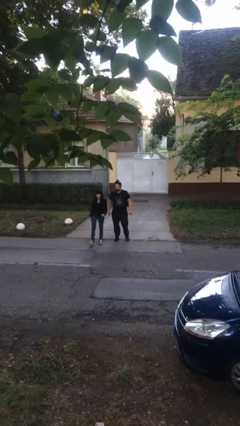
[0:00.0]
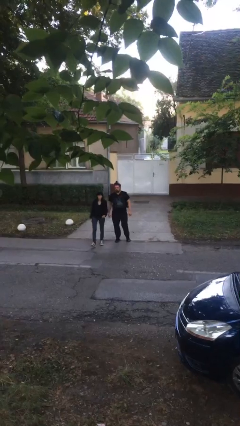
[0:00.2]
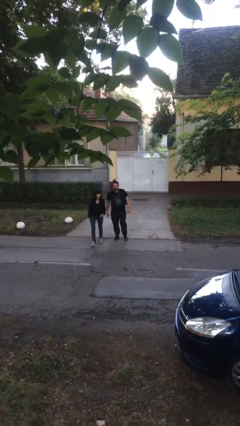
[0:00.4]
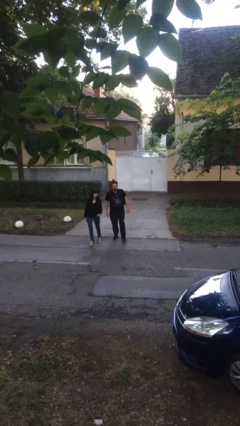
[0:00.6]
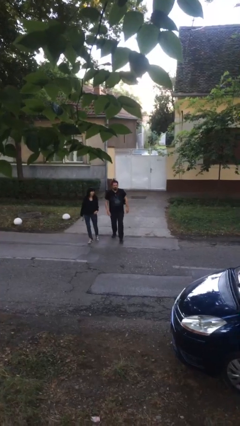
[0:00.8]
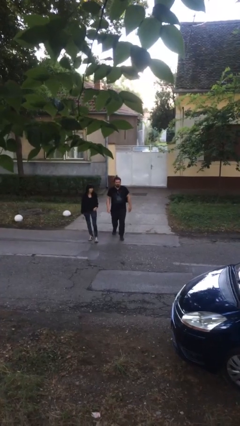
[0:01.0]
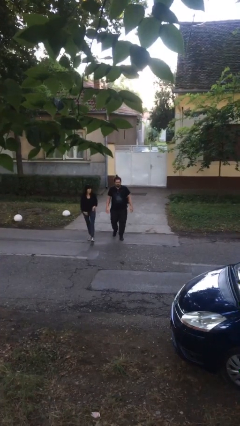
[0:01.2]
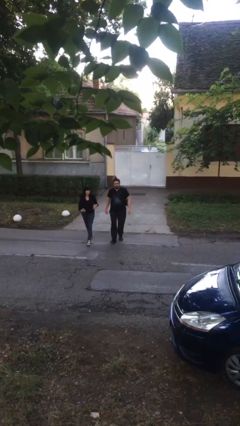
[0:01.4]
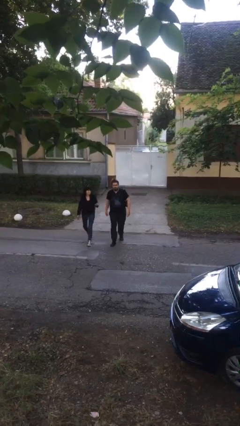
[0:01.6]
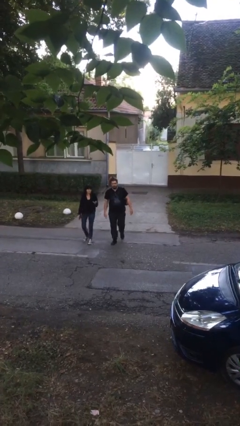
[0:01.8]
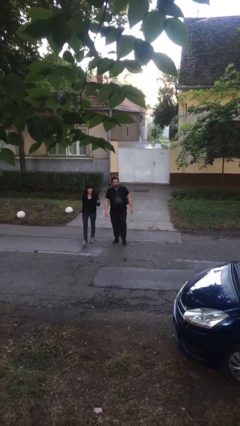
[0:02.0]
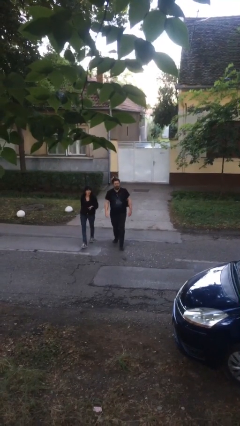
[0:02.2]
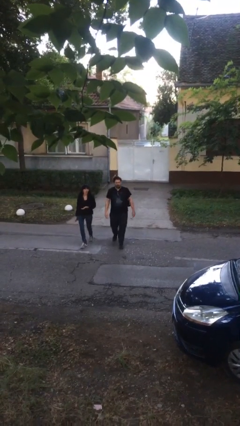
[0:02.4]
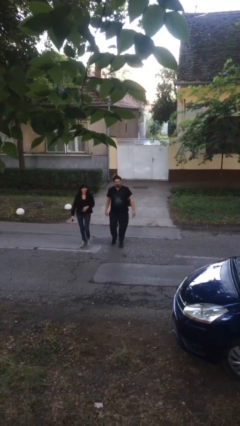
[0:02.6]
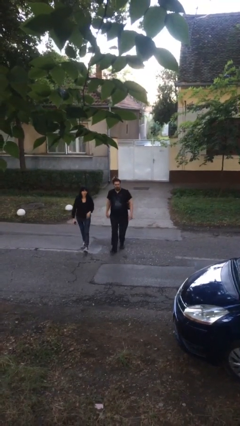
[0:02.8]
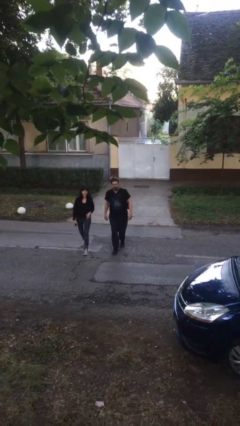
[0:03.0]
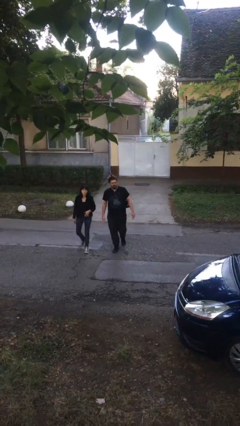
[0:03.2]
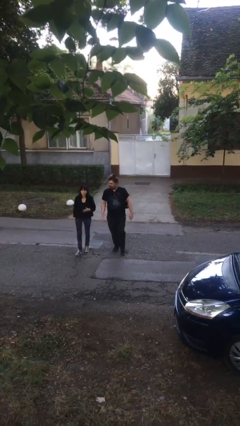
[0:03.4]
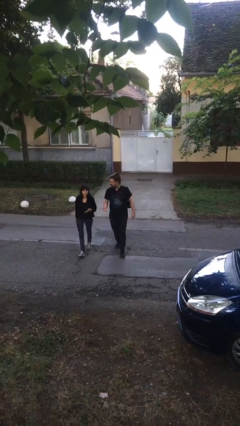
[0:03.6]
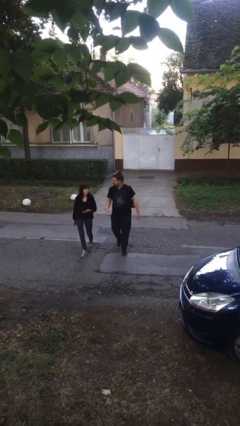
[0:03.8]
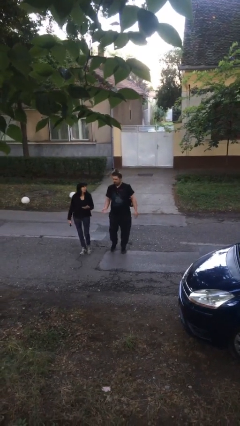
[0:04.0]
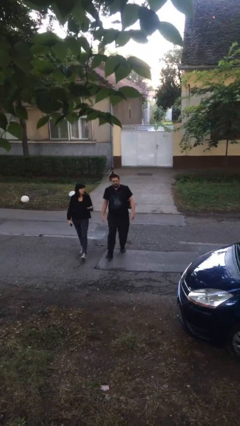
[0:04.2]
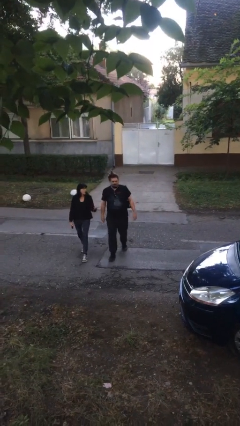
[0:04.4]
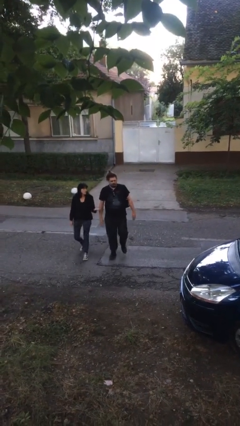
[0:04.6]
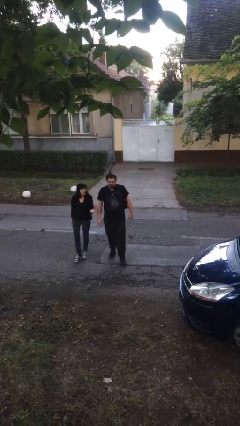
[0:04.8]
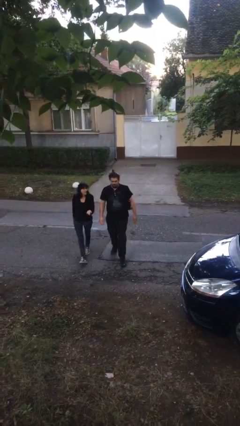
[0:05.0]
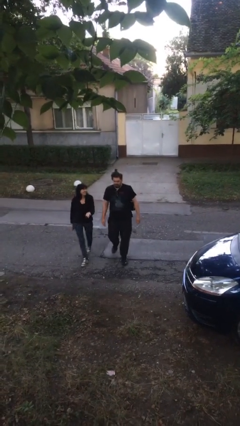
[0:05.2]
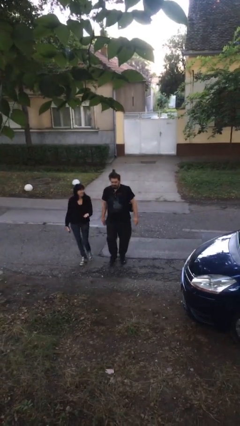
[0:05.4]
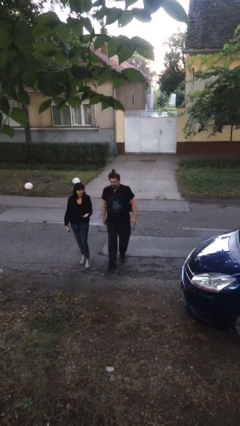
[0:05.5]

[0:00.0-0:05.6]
person talks to person

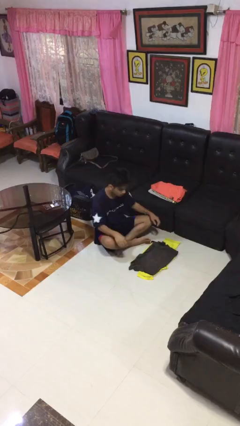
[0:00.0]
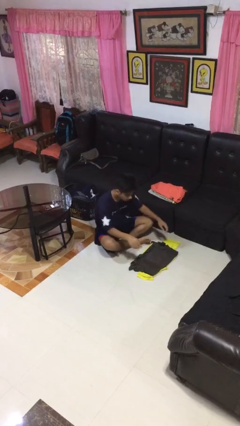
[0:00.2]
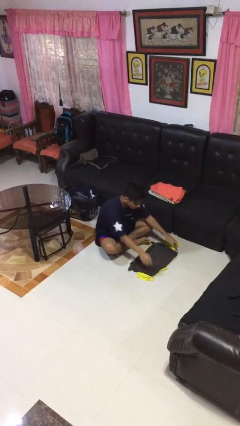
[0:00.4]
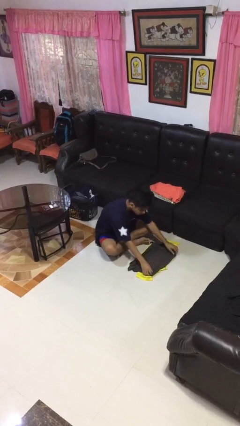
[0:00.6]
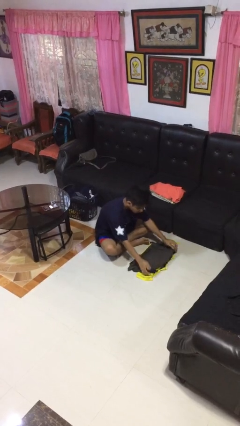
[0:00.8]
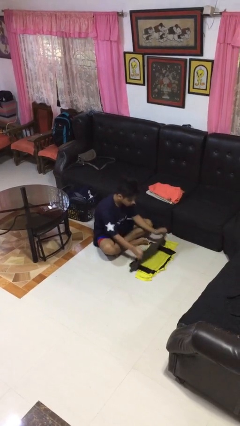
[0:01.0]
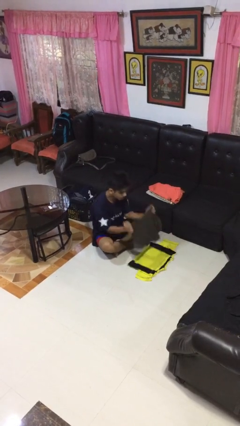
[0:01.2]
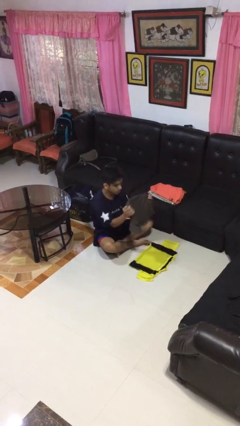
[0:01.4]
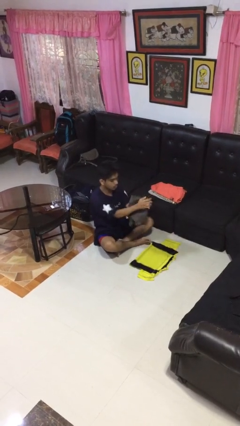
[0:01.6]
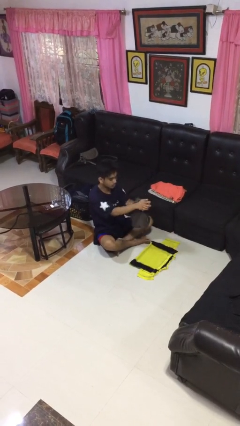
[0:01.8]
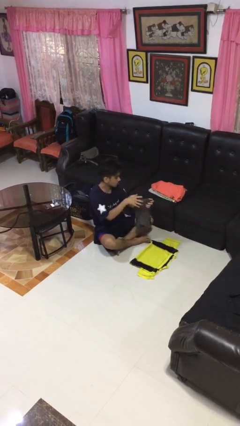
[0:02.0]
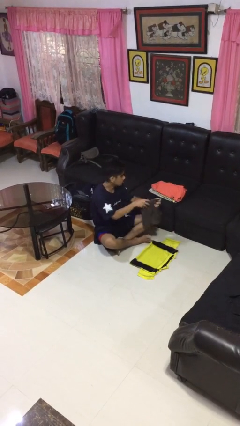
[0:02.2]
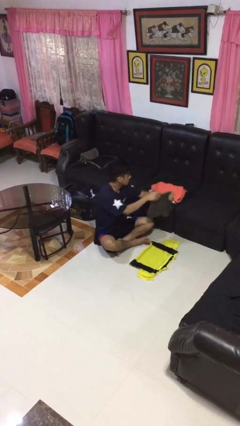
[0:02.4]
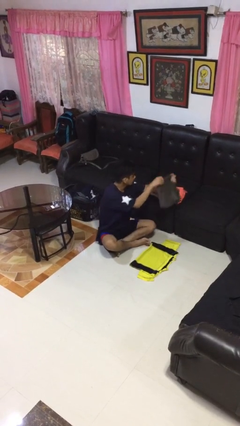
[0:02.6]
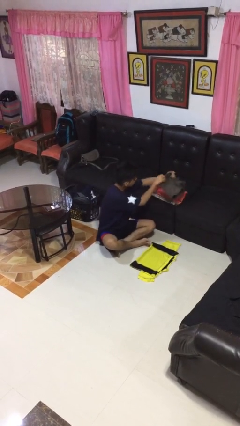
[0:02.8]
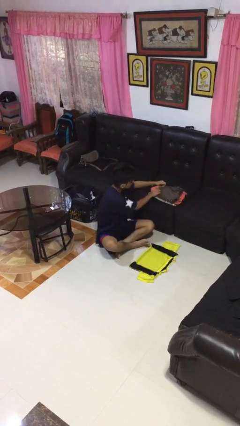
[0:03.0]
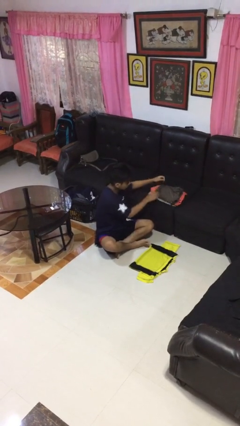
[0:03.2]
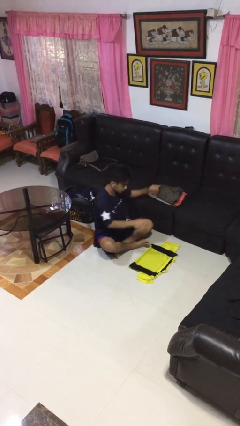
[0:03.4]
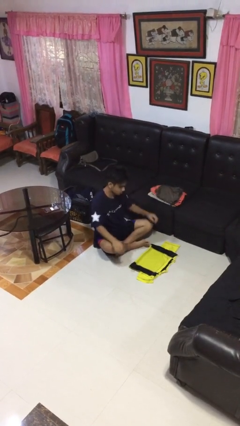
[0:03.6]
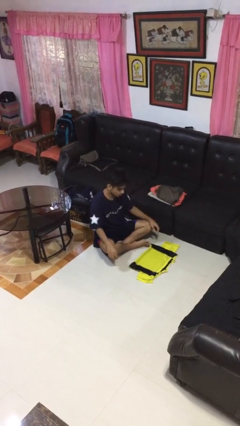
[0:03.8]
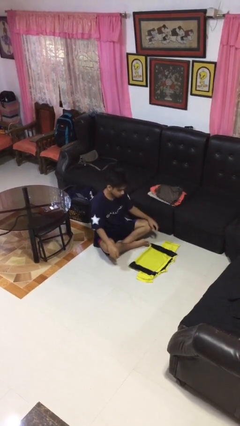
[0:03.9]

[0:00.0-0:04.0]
person folds shirt

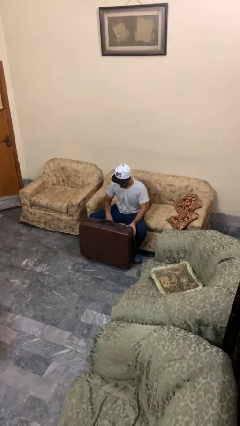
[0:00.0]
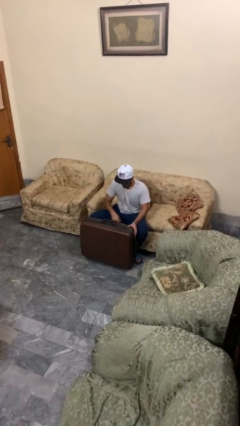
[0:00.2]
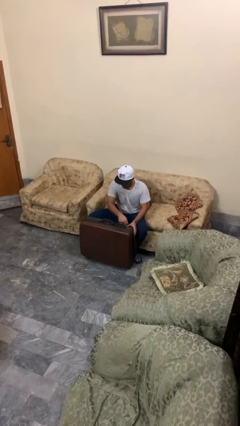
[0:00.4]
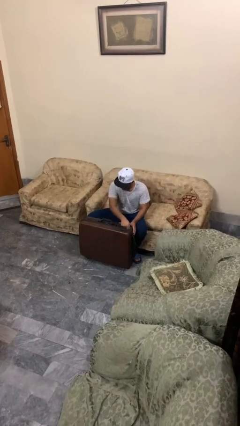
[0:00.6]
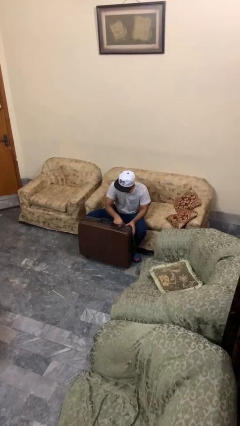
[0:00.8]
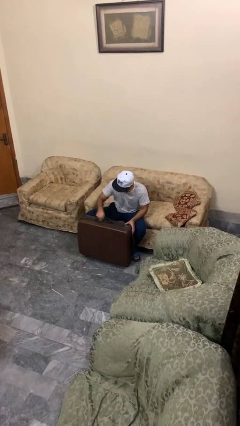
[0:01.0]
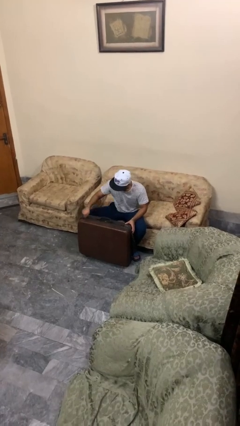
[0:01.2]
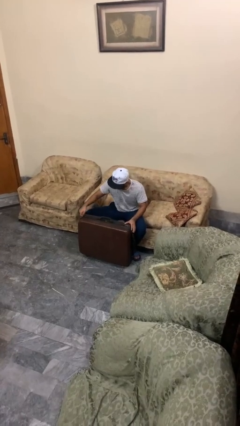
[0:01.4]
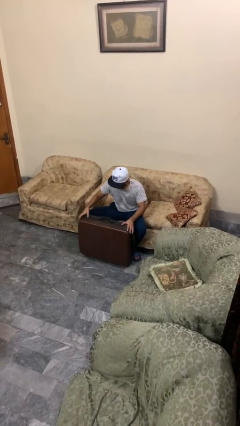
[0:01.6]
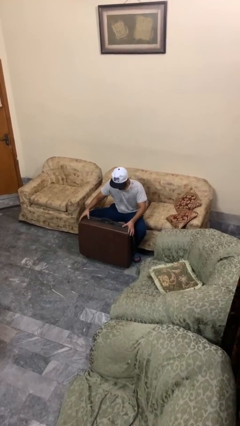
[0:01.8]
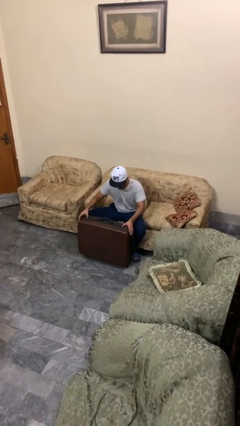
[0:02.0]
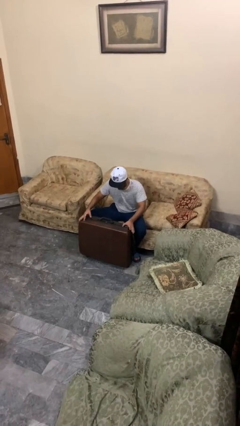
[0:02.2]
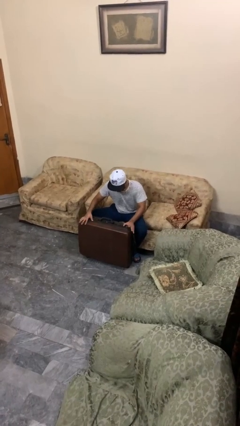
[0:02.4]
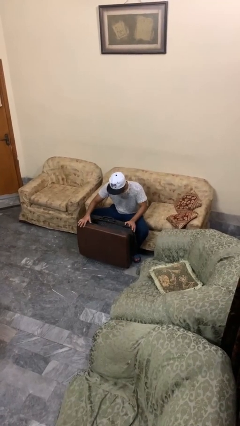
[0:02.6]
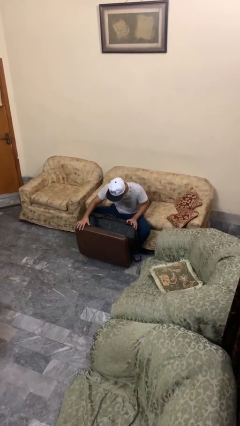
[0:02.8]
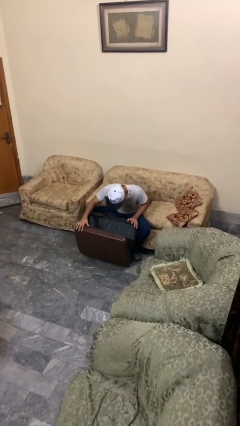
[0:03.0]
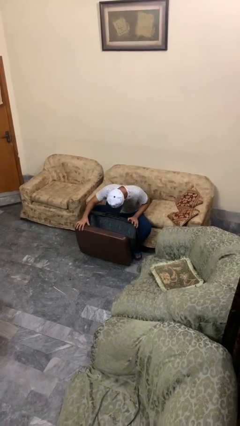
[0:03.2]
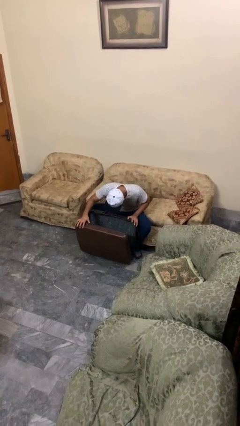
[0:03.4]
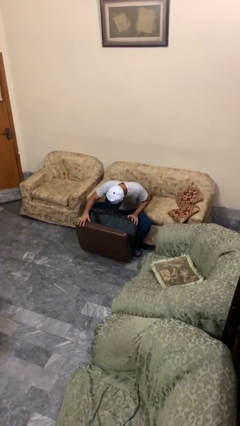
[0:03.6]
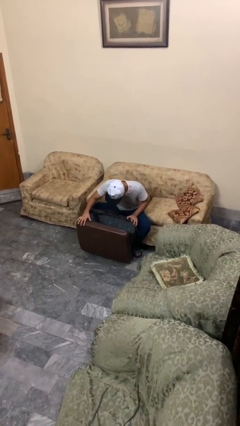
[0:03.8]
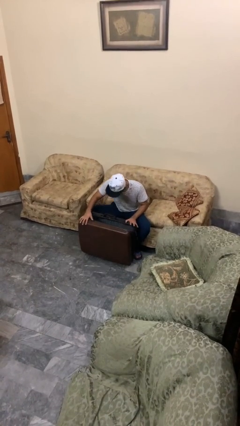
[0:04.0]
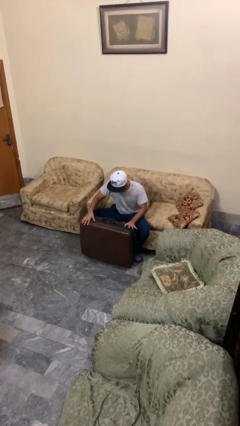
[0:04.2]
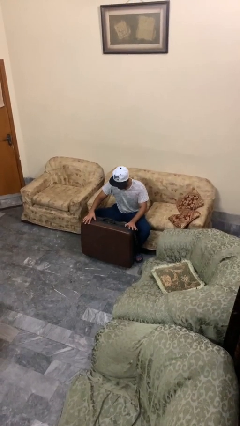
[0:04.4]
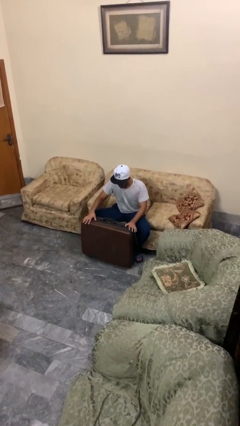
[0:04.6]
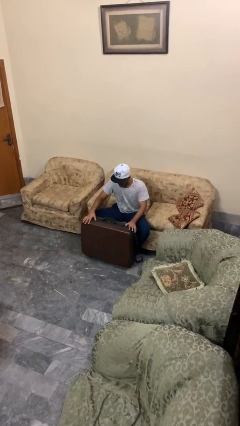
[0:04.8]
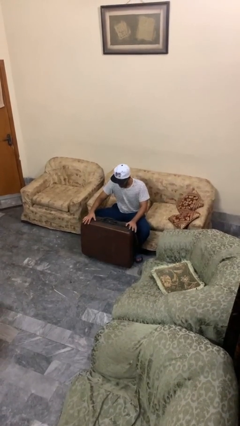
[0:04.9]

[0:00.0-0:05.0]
person opens suitcase

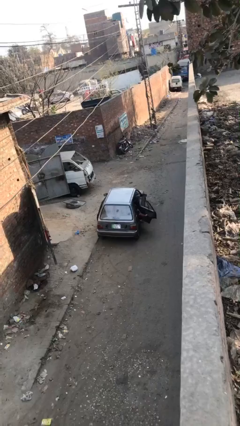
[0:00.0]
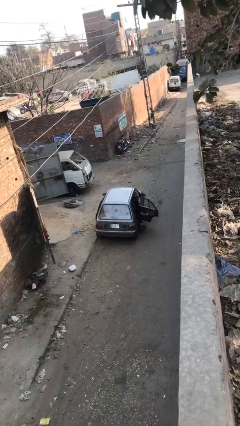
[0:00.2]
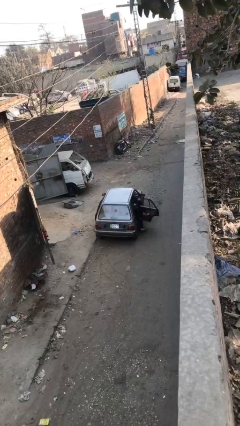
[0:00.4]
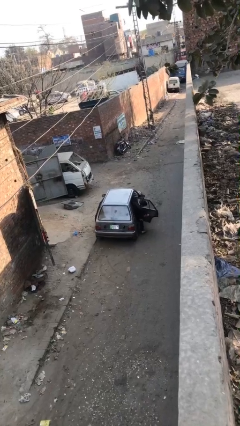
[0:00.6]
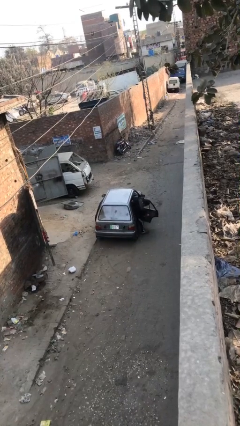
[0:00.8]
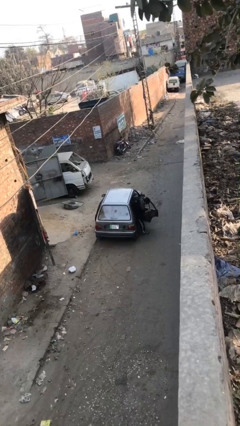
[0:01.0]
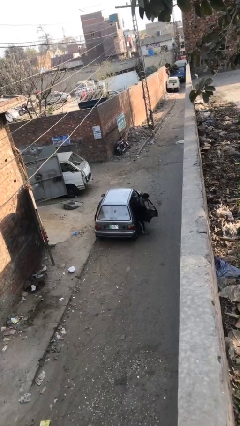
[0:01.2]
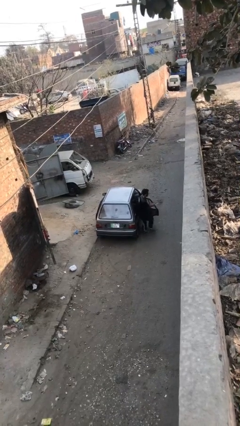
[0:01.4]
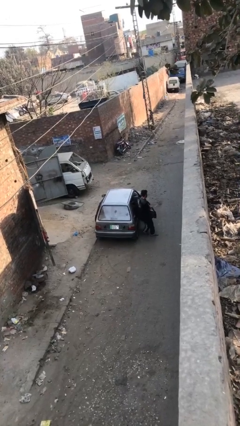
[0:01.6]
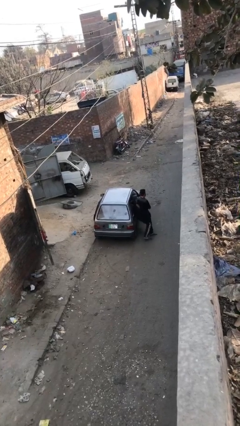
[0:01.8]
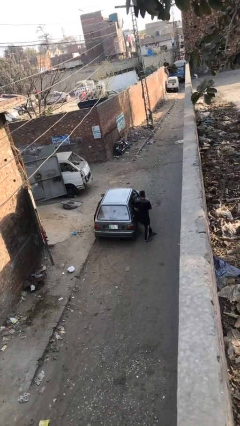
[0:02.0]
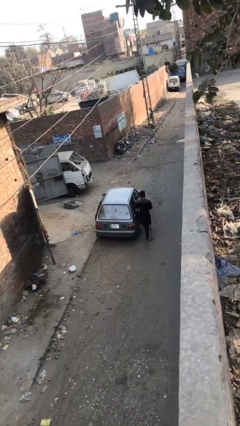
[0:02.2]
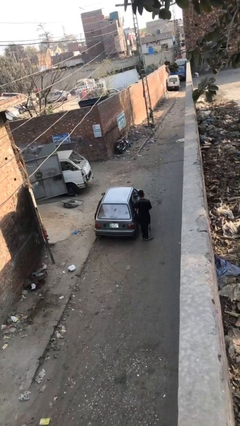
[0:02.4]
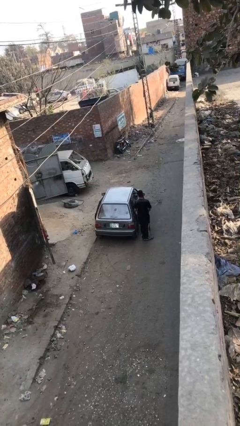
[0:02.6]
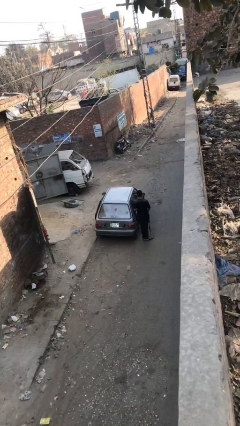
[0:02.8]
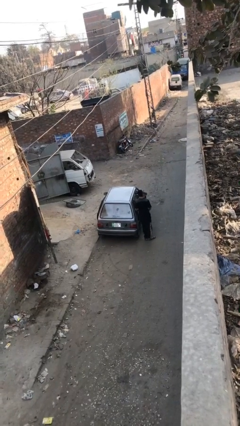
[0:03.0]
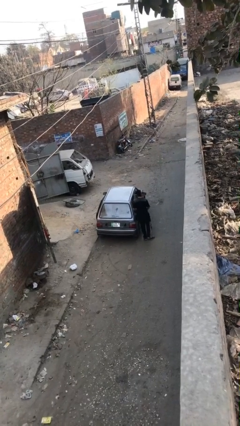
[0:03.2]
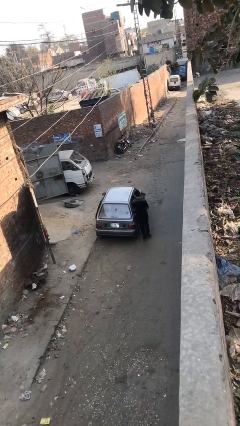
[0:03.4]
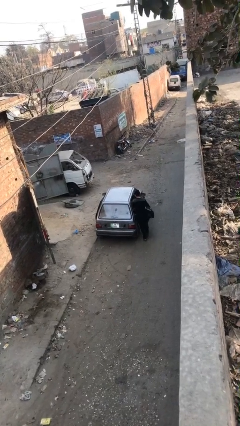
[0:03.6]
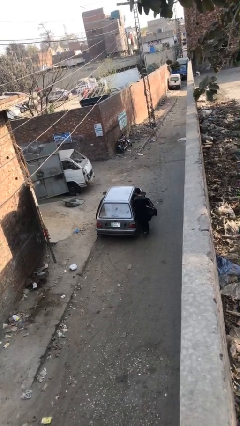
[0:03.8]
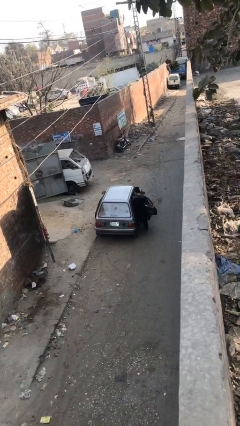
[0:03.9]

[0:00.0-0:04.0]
car drops off person
